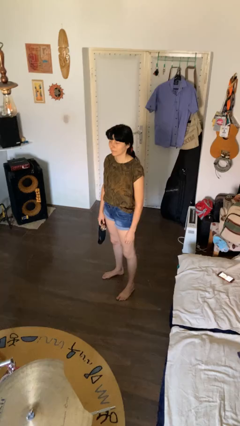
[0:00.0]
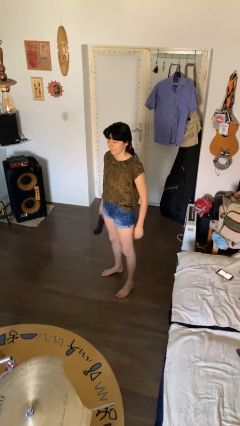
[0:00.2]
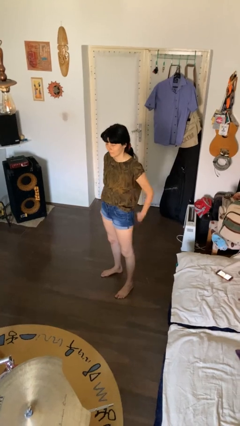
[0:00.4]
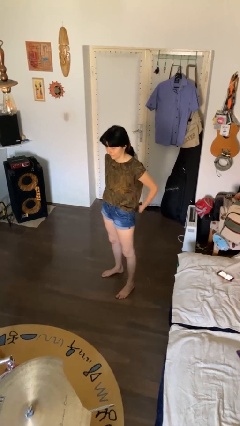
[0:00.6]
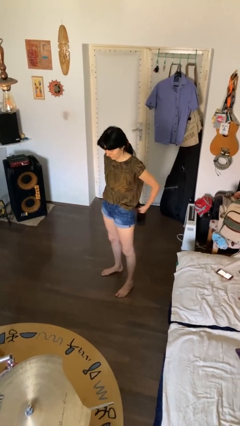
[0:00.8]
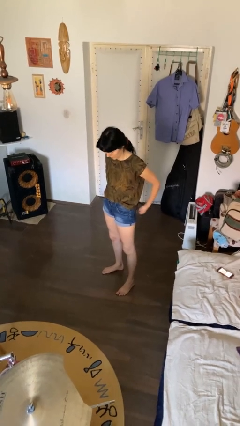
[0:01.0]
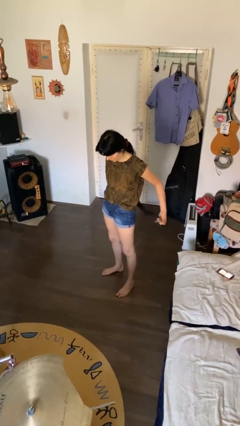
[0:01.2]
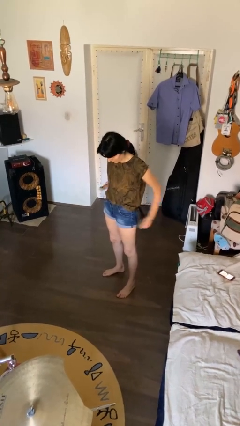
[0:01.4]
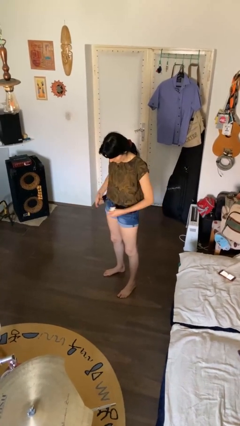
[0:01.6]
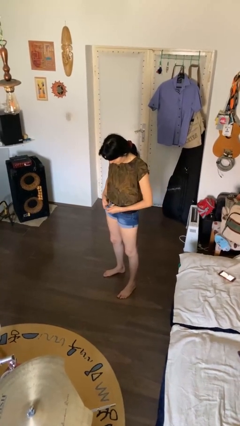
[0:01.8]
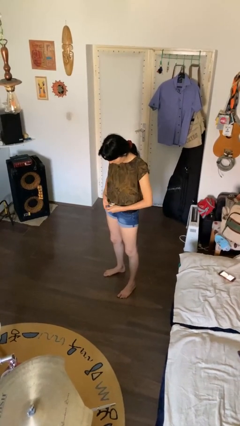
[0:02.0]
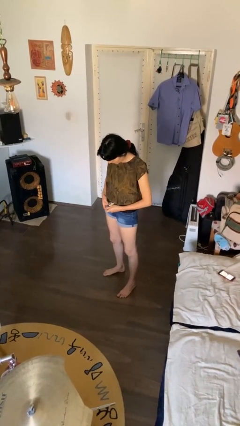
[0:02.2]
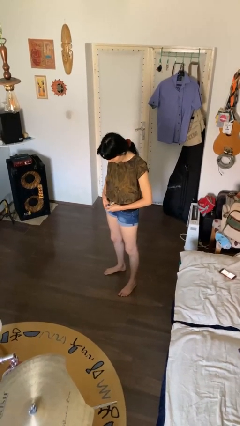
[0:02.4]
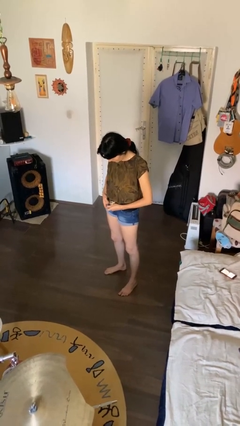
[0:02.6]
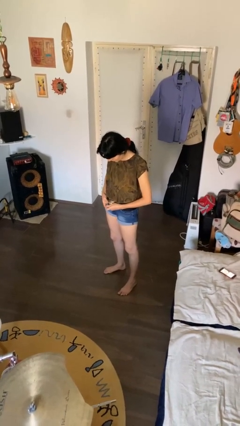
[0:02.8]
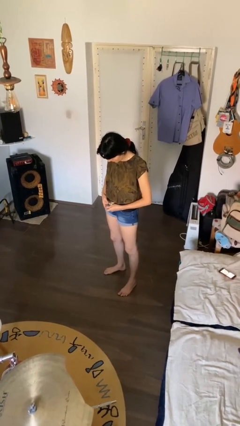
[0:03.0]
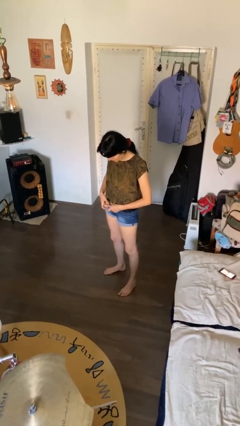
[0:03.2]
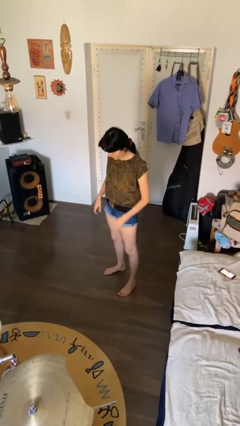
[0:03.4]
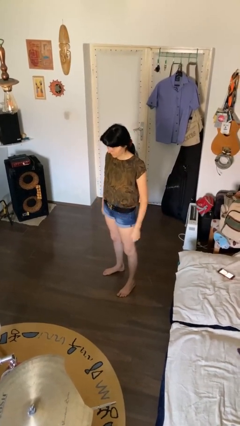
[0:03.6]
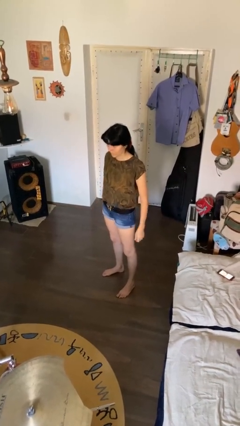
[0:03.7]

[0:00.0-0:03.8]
person puts on belt

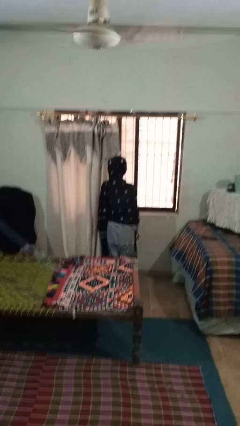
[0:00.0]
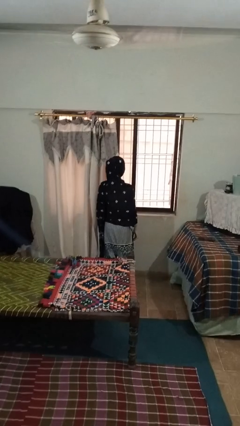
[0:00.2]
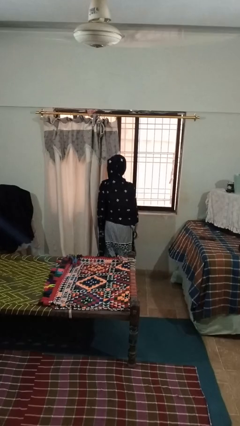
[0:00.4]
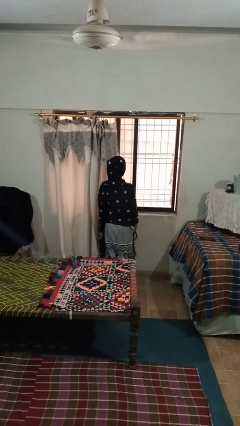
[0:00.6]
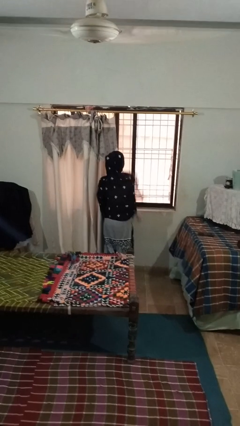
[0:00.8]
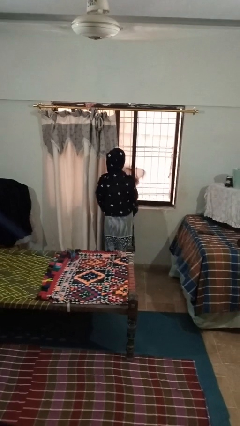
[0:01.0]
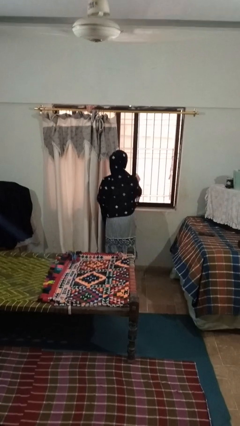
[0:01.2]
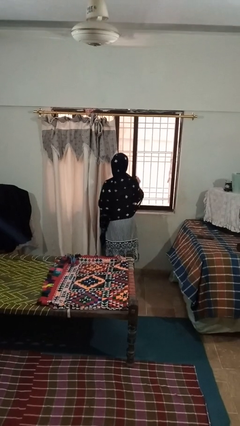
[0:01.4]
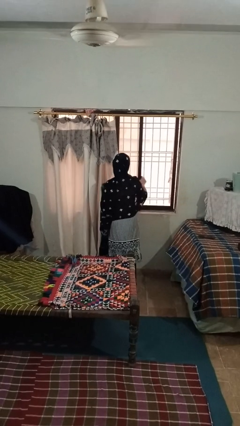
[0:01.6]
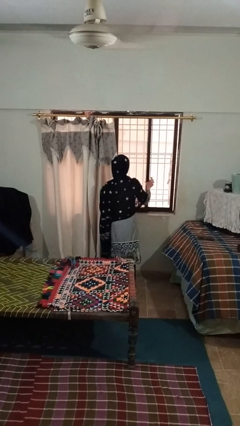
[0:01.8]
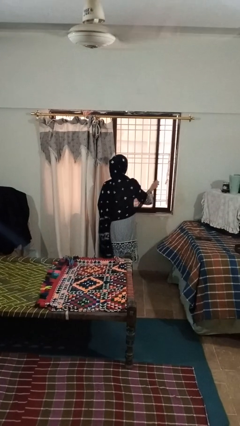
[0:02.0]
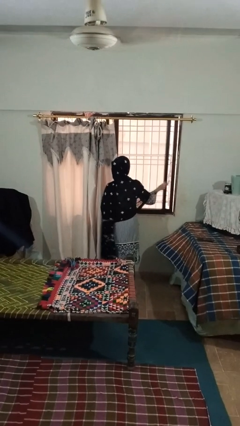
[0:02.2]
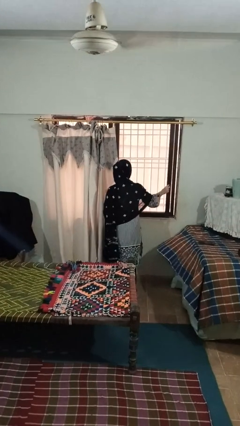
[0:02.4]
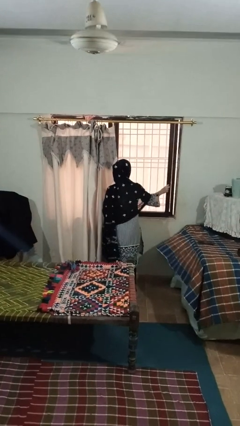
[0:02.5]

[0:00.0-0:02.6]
person closes home window

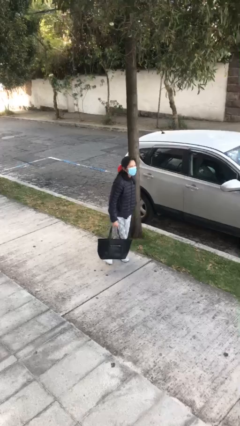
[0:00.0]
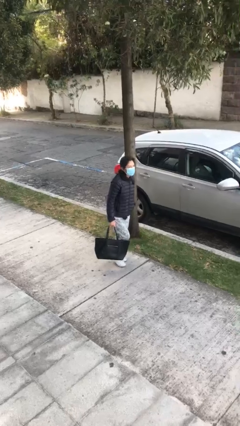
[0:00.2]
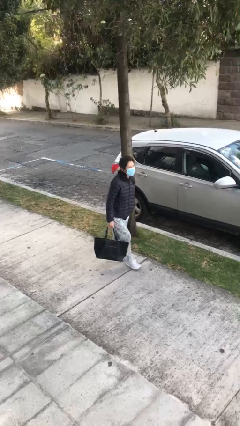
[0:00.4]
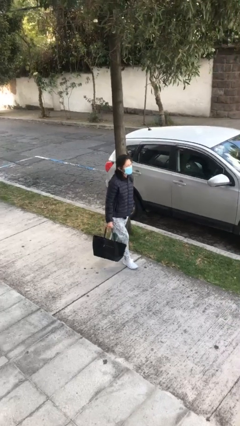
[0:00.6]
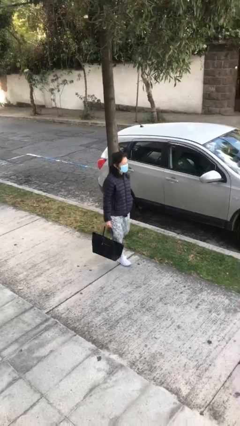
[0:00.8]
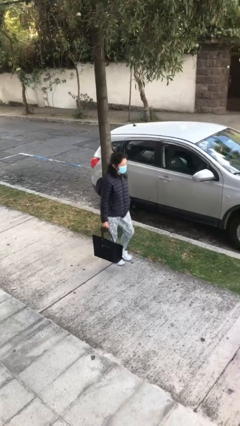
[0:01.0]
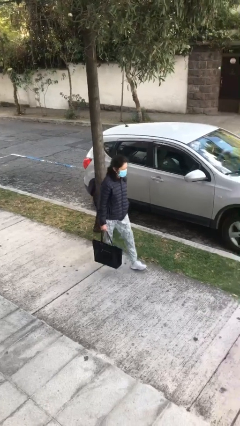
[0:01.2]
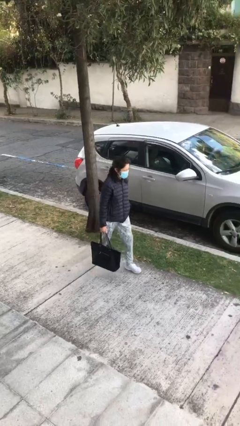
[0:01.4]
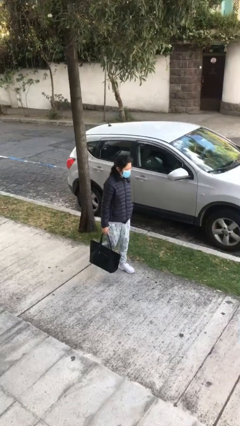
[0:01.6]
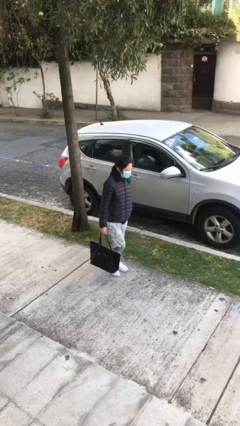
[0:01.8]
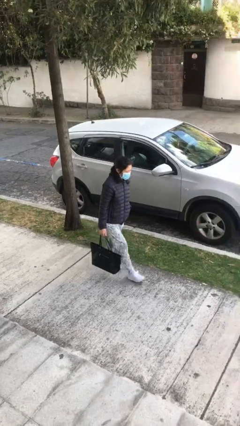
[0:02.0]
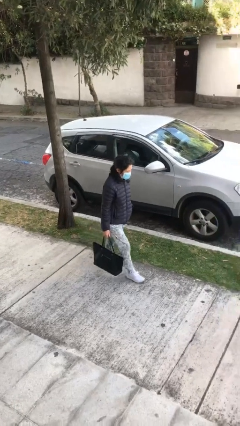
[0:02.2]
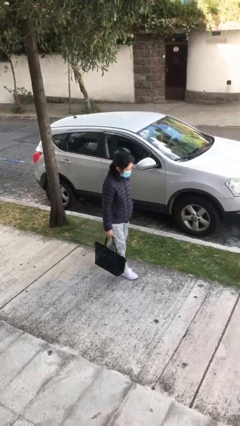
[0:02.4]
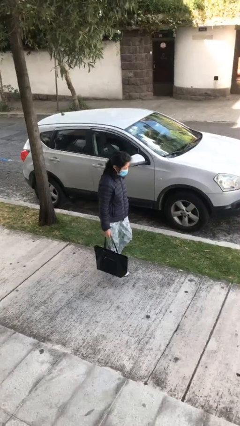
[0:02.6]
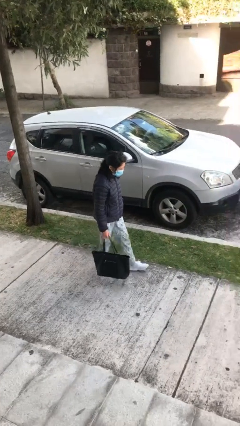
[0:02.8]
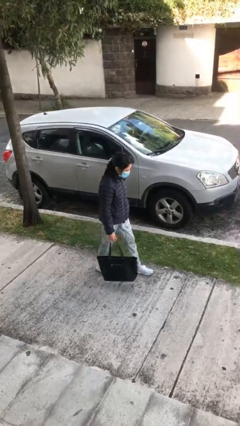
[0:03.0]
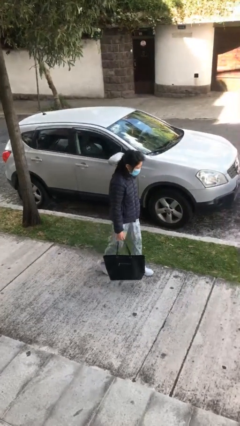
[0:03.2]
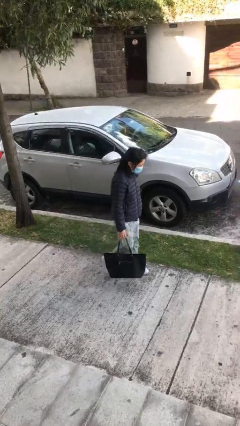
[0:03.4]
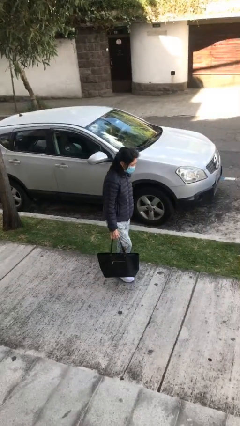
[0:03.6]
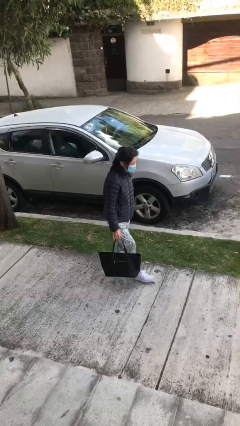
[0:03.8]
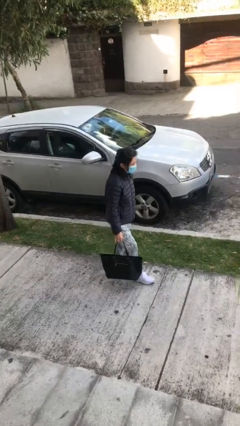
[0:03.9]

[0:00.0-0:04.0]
person carries heavy object

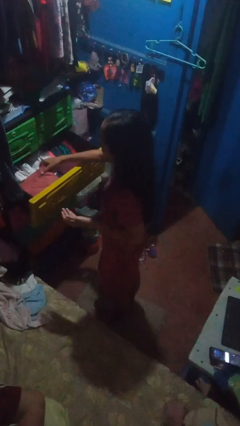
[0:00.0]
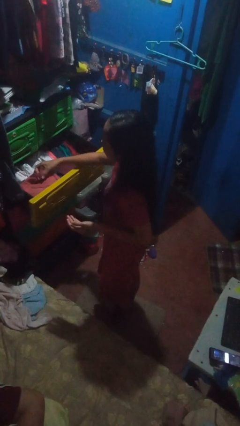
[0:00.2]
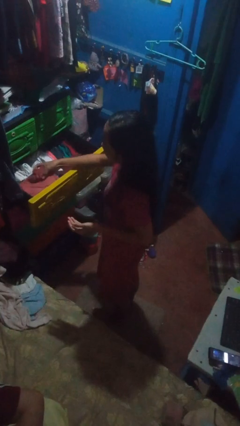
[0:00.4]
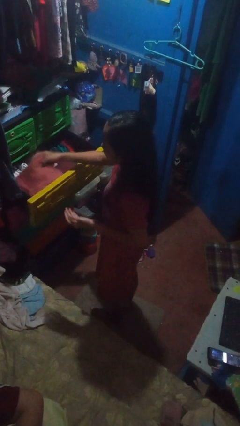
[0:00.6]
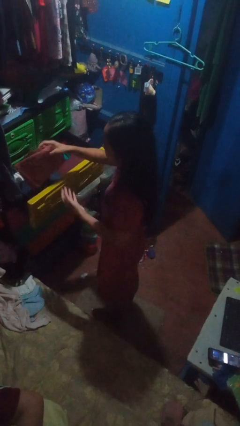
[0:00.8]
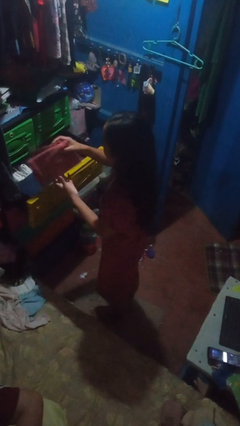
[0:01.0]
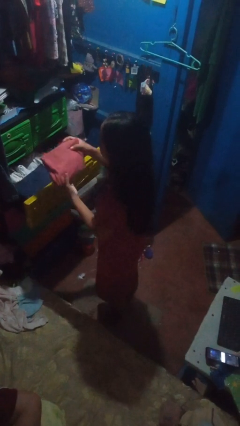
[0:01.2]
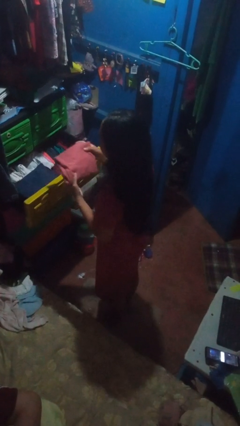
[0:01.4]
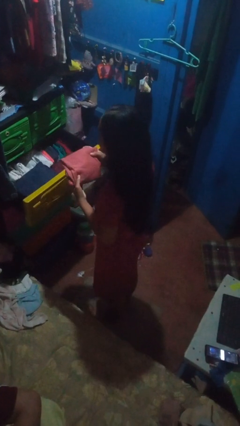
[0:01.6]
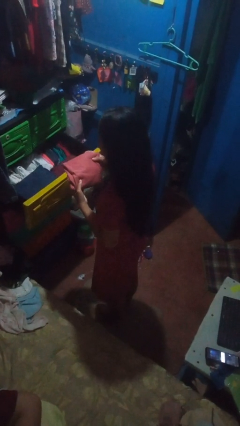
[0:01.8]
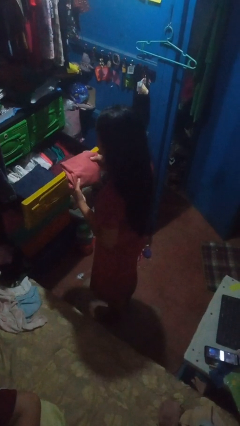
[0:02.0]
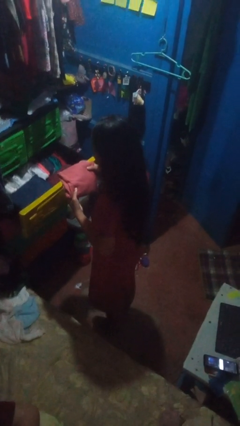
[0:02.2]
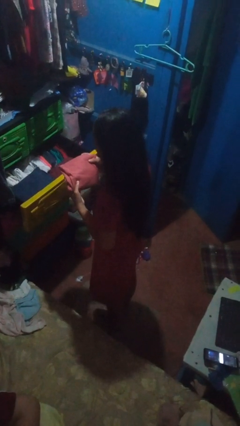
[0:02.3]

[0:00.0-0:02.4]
person takes clothes from dresser

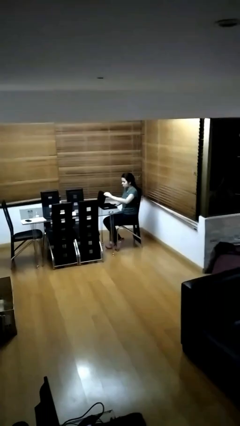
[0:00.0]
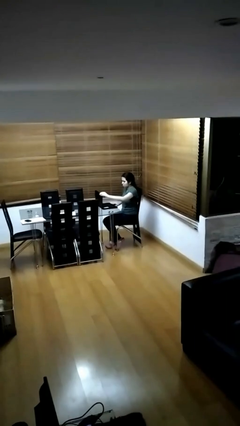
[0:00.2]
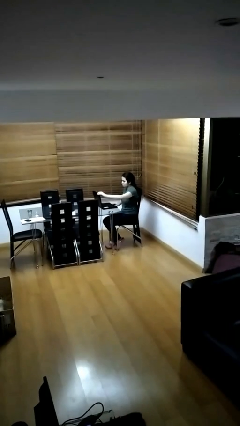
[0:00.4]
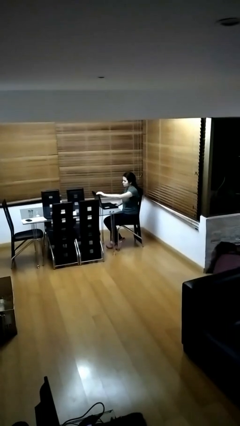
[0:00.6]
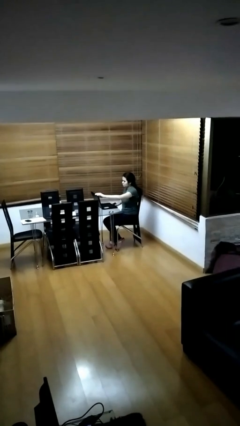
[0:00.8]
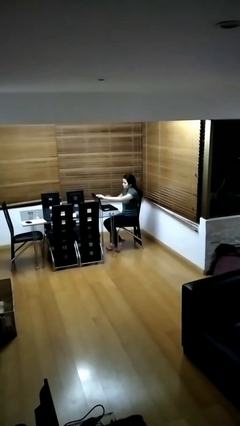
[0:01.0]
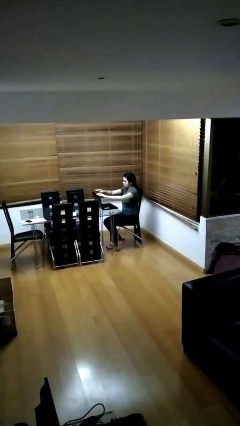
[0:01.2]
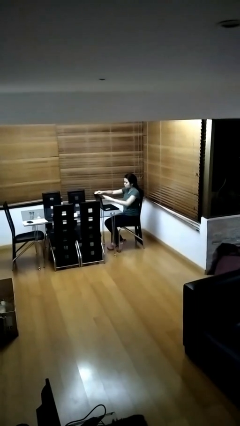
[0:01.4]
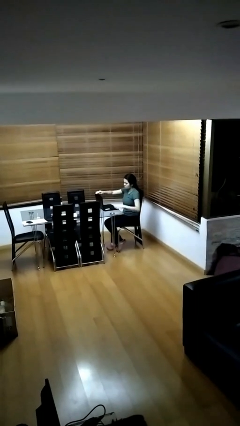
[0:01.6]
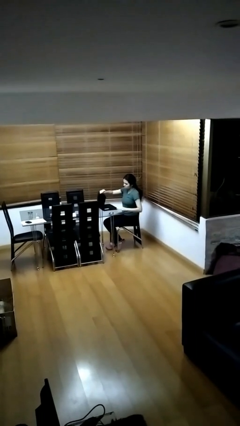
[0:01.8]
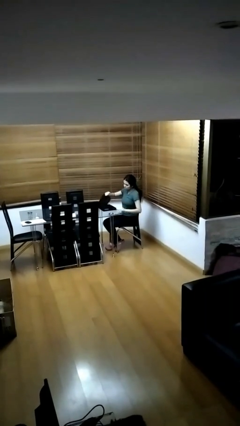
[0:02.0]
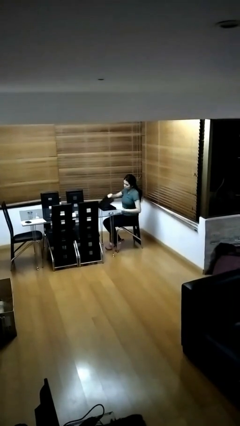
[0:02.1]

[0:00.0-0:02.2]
person interacts with laptop

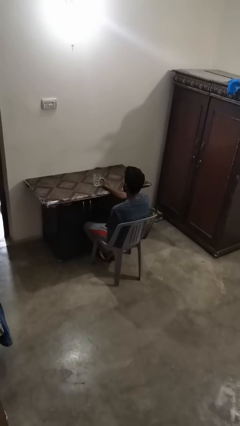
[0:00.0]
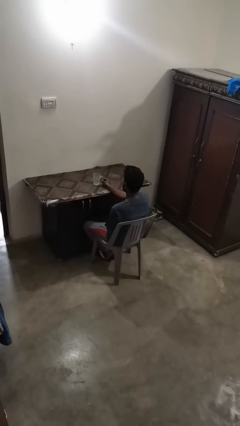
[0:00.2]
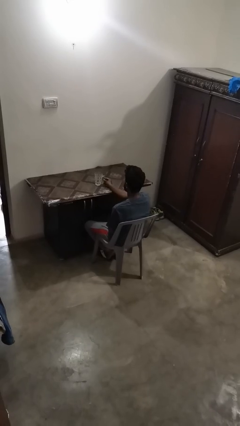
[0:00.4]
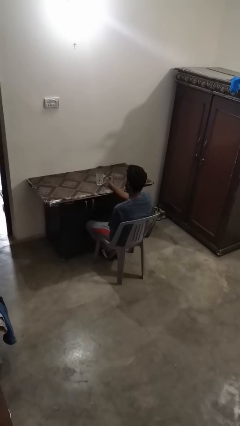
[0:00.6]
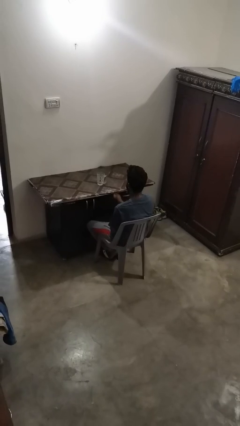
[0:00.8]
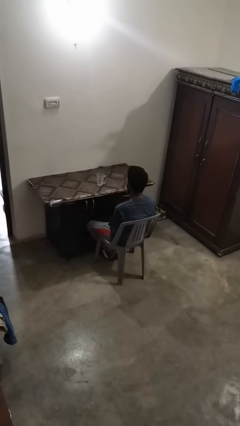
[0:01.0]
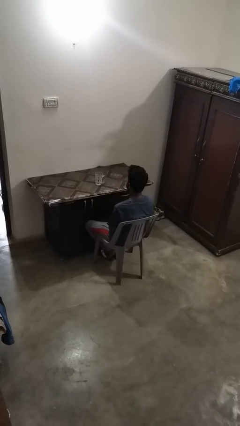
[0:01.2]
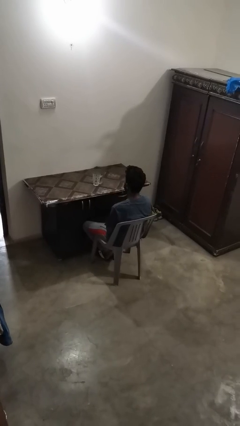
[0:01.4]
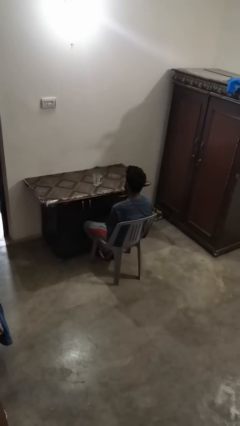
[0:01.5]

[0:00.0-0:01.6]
person sets upright glass

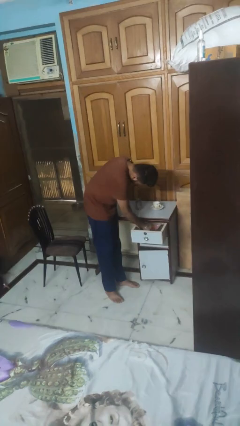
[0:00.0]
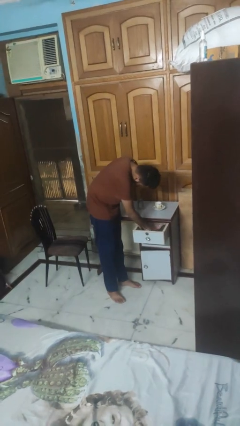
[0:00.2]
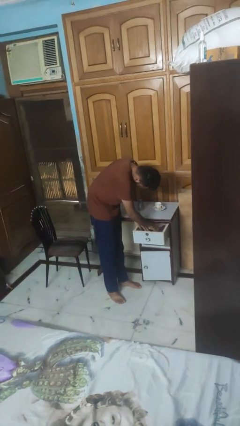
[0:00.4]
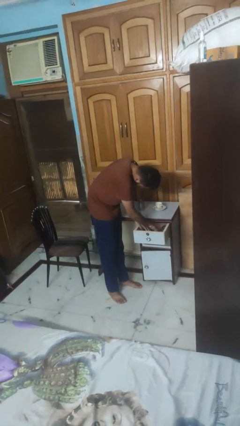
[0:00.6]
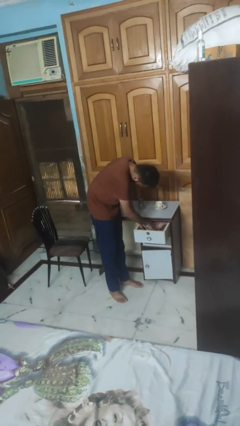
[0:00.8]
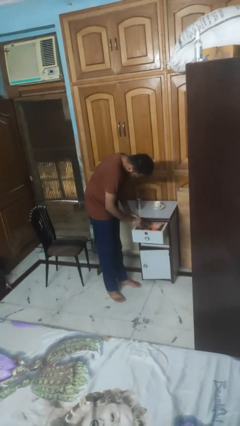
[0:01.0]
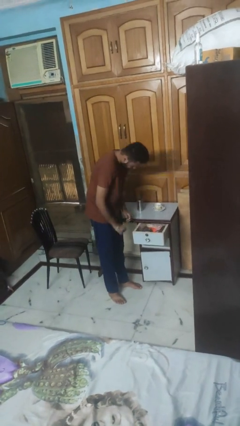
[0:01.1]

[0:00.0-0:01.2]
person searches in kitchen drawer
